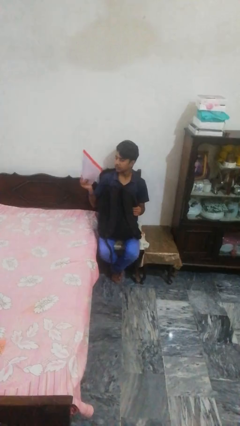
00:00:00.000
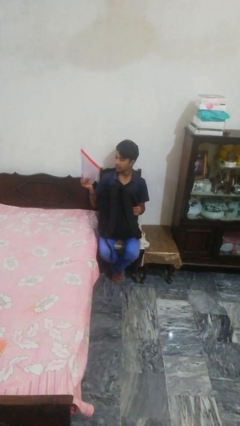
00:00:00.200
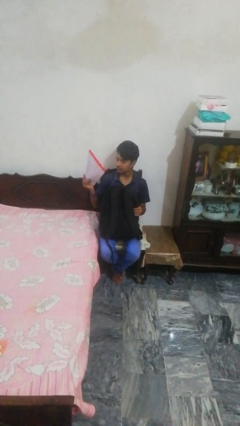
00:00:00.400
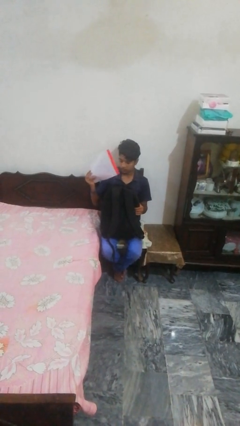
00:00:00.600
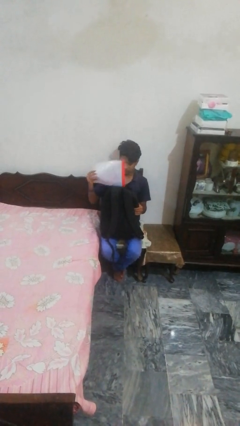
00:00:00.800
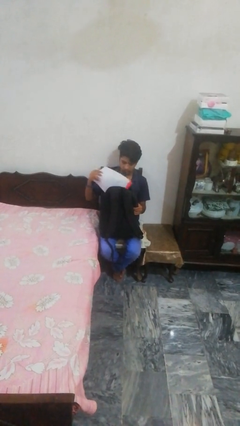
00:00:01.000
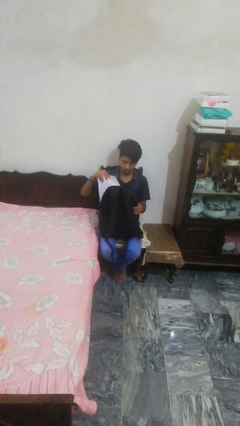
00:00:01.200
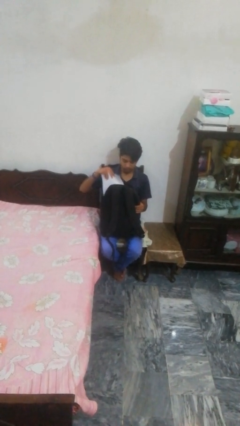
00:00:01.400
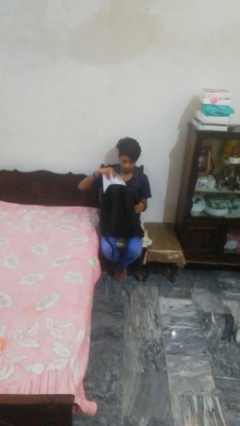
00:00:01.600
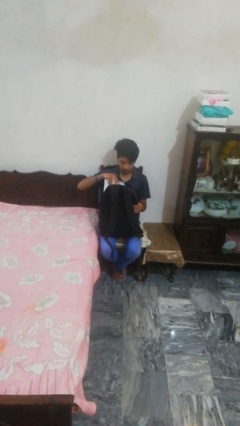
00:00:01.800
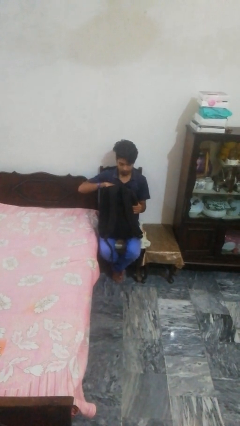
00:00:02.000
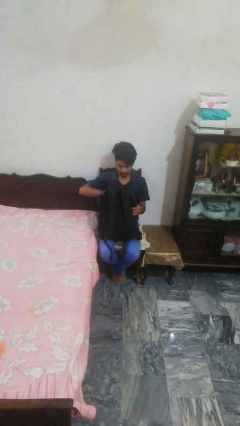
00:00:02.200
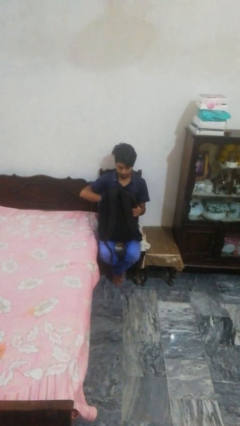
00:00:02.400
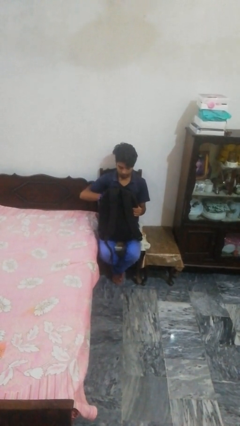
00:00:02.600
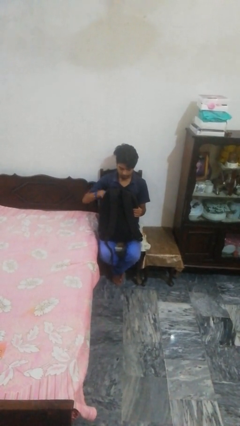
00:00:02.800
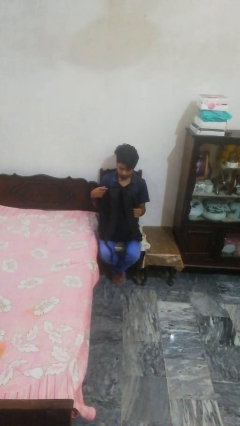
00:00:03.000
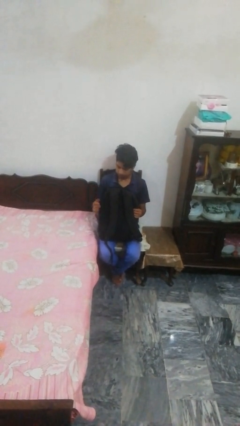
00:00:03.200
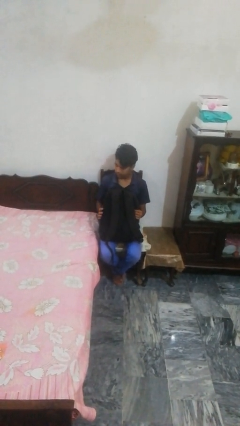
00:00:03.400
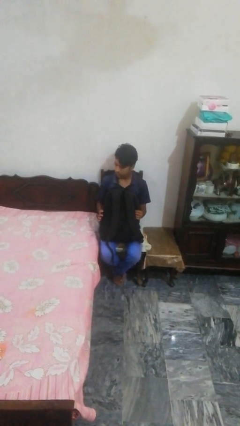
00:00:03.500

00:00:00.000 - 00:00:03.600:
person puts object into backpack

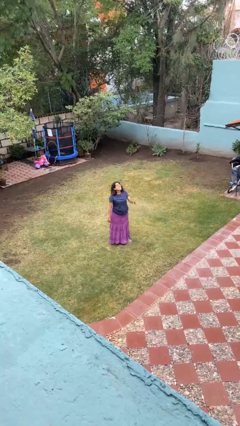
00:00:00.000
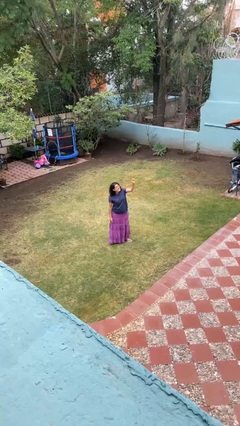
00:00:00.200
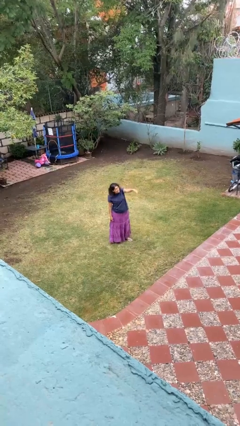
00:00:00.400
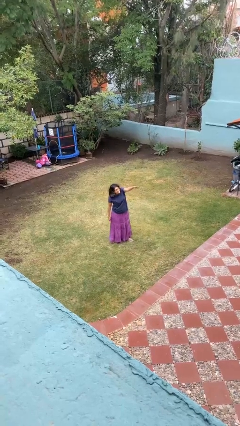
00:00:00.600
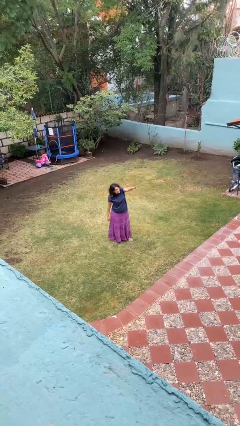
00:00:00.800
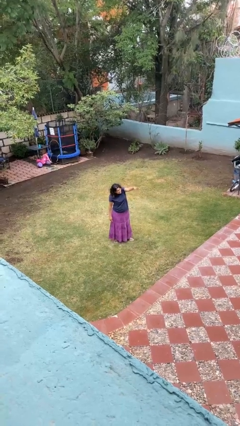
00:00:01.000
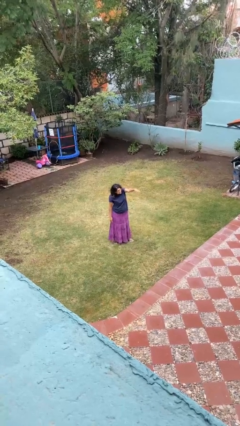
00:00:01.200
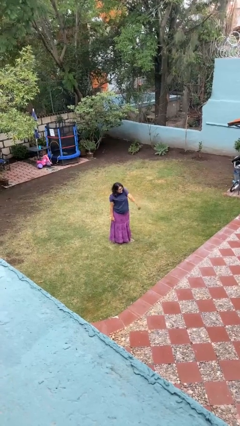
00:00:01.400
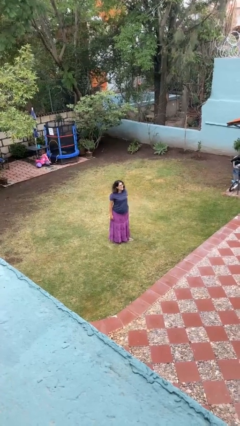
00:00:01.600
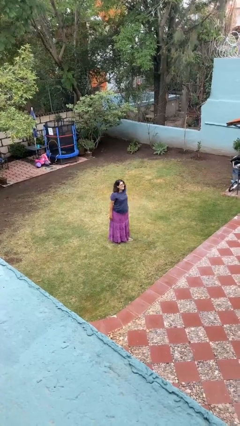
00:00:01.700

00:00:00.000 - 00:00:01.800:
person points at person

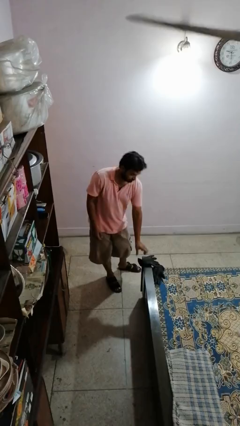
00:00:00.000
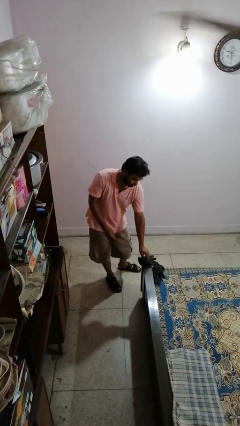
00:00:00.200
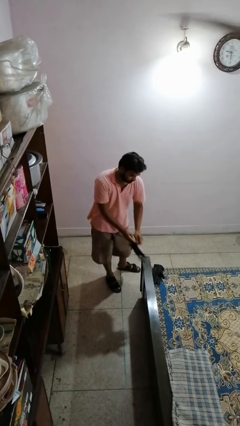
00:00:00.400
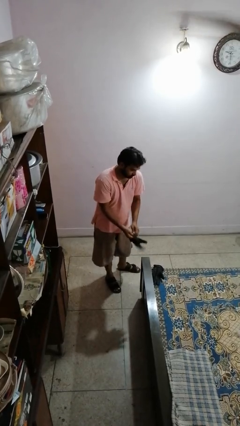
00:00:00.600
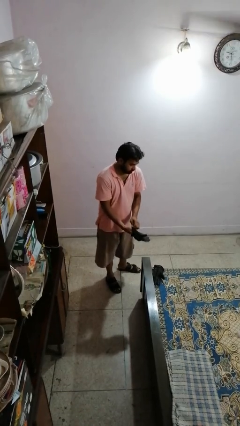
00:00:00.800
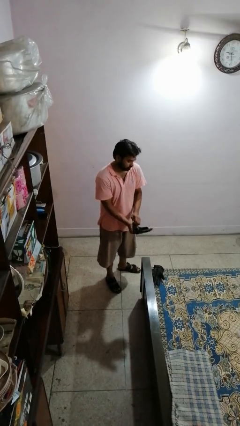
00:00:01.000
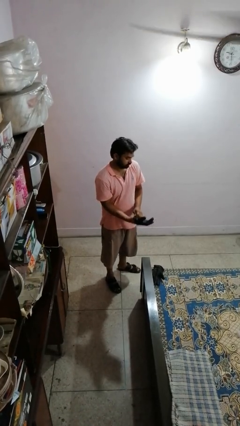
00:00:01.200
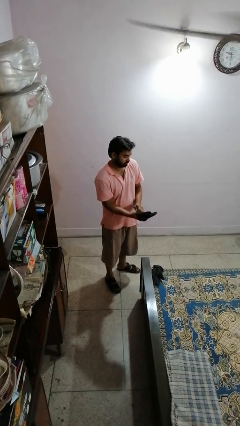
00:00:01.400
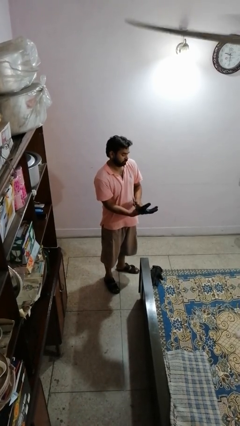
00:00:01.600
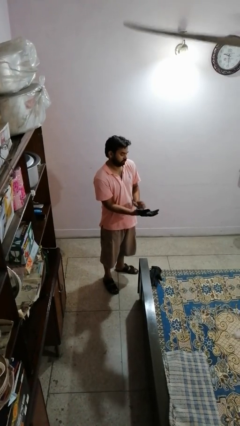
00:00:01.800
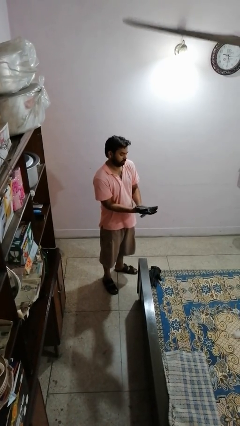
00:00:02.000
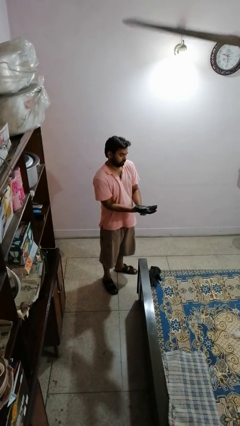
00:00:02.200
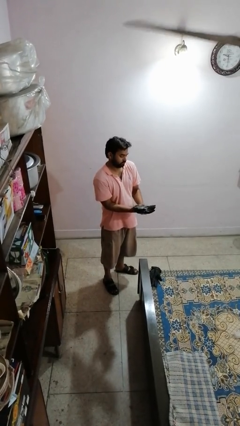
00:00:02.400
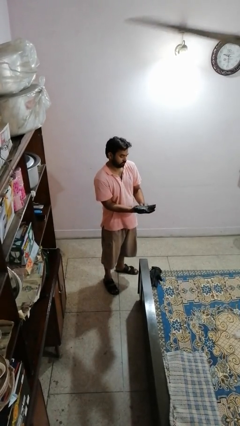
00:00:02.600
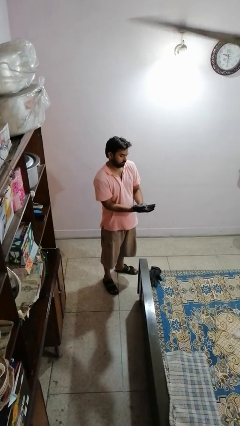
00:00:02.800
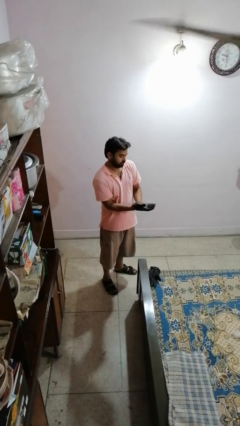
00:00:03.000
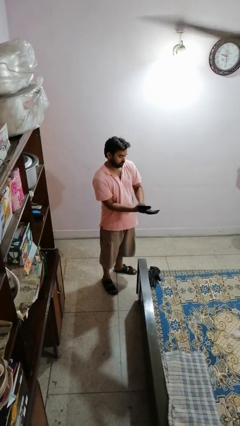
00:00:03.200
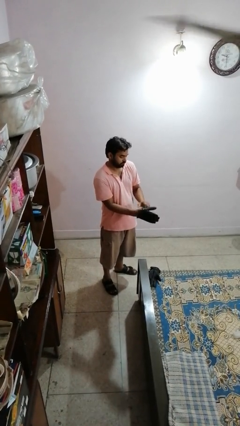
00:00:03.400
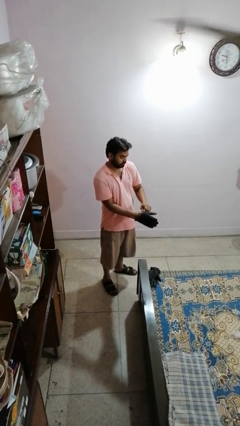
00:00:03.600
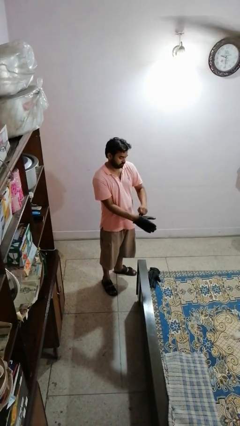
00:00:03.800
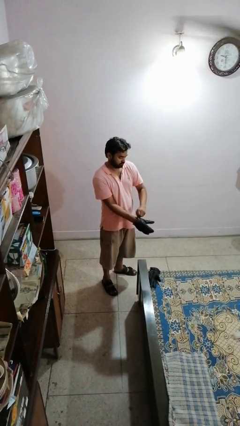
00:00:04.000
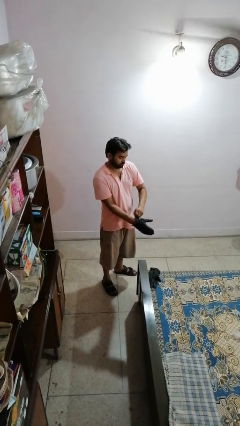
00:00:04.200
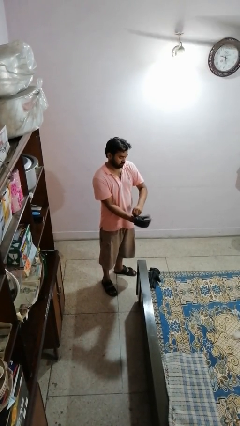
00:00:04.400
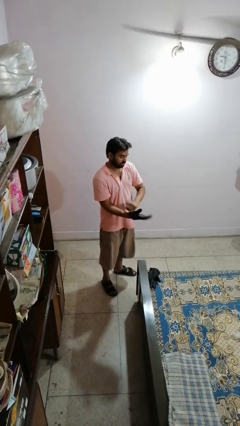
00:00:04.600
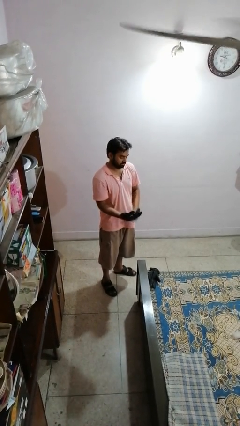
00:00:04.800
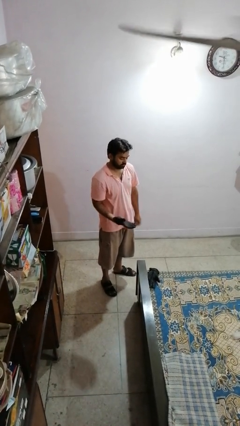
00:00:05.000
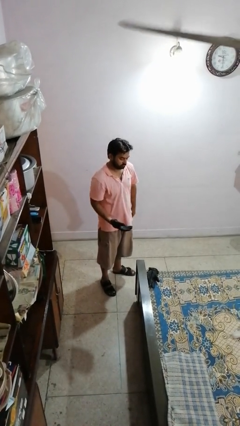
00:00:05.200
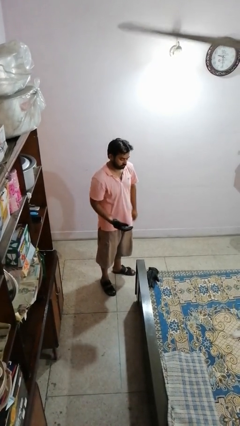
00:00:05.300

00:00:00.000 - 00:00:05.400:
person puts on gloves

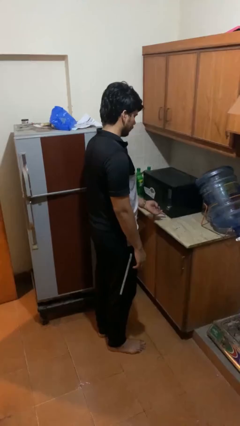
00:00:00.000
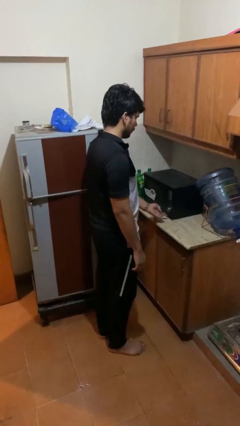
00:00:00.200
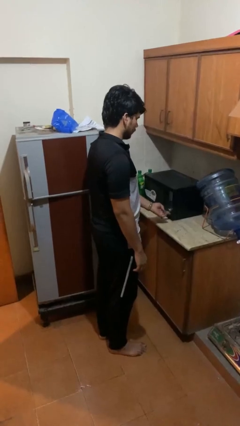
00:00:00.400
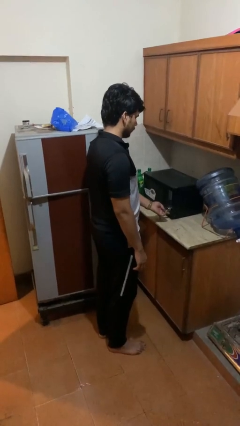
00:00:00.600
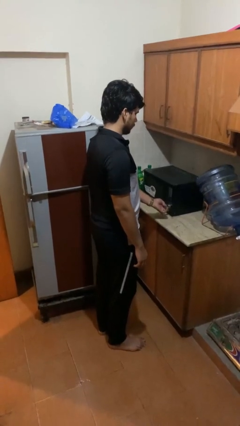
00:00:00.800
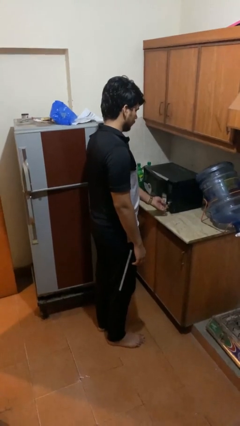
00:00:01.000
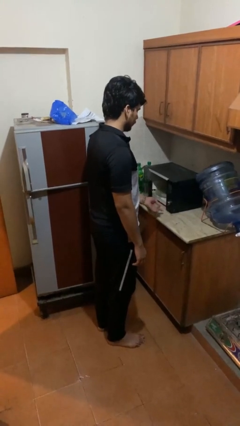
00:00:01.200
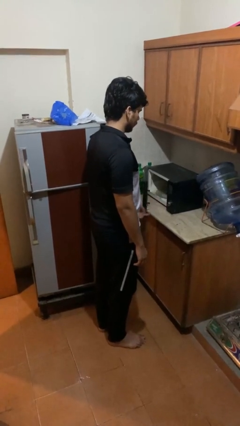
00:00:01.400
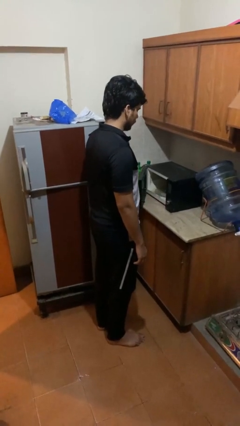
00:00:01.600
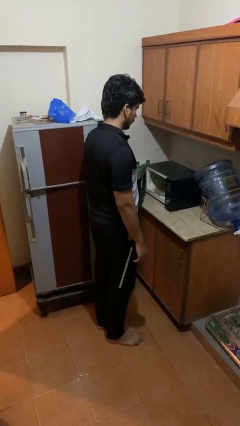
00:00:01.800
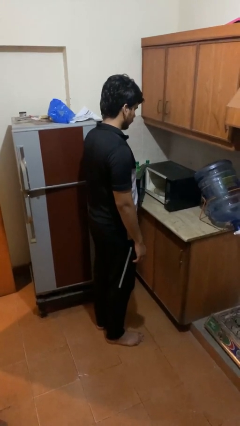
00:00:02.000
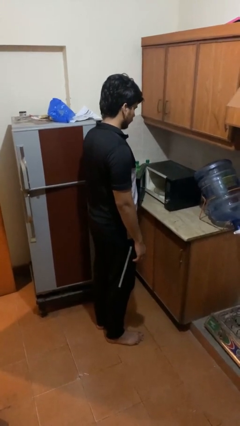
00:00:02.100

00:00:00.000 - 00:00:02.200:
person opens oven door

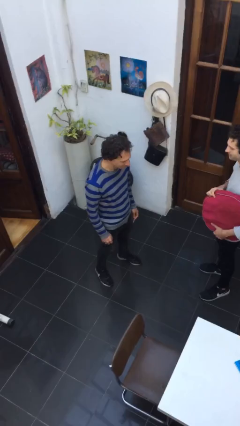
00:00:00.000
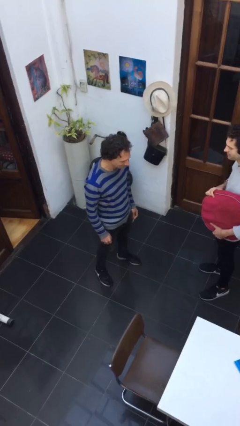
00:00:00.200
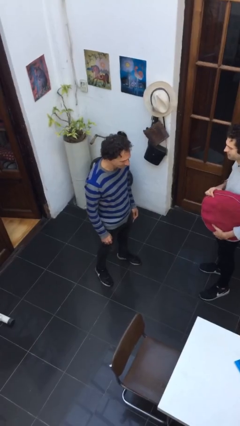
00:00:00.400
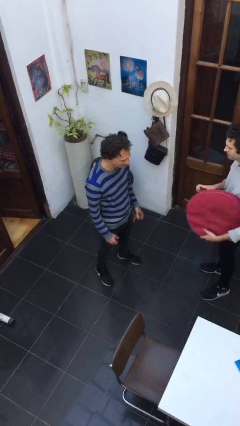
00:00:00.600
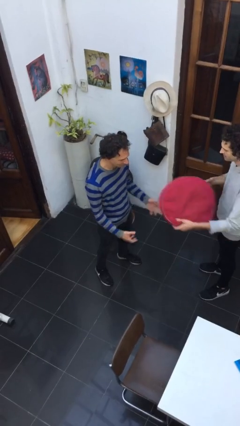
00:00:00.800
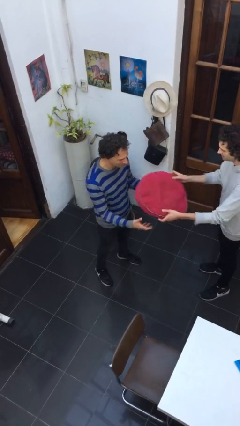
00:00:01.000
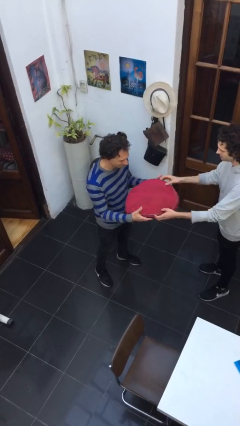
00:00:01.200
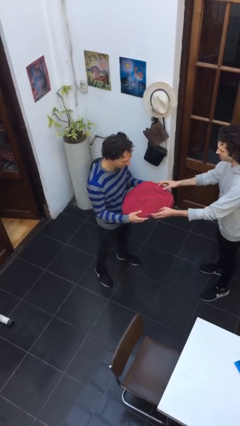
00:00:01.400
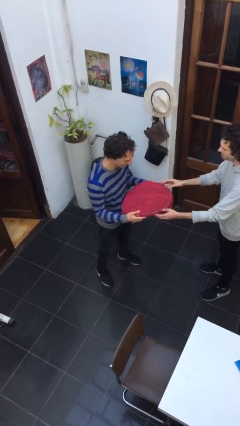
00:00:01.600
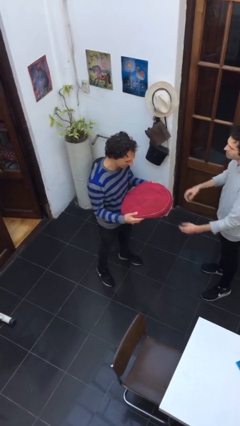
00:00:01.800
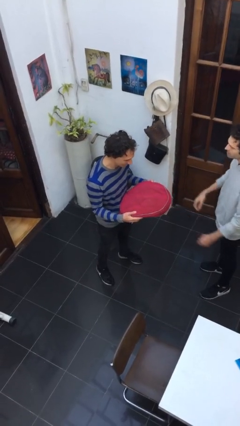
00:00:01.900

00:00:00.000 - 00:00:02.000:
person transfers object to person

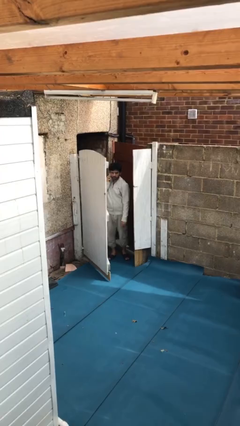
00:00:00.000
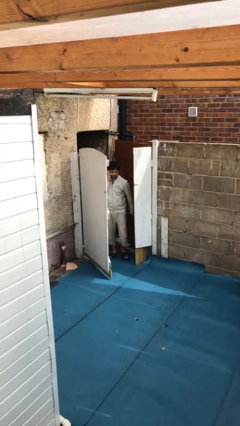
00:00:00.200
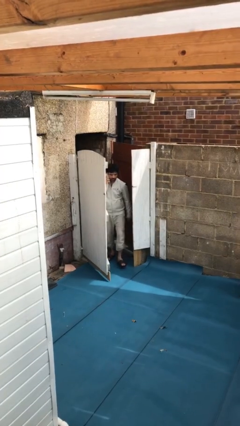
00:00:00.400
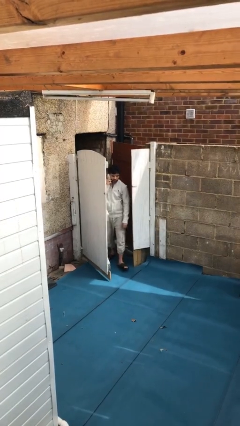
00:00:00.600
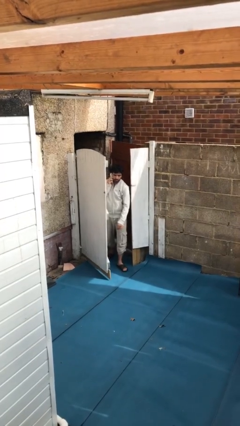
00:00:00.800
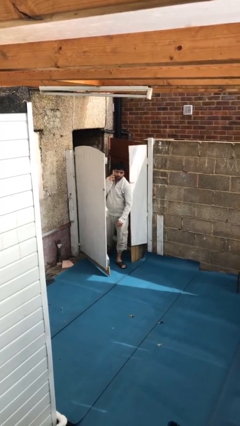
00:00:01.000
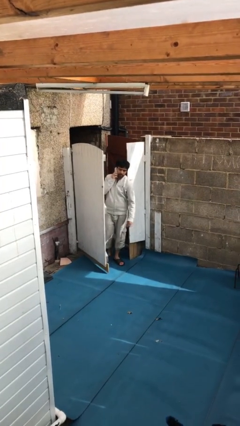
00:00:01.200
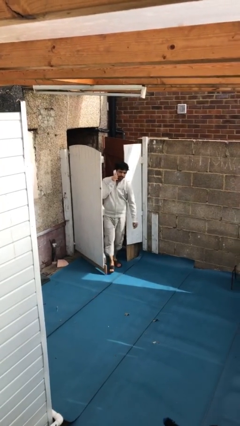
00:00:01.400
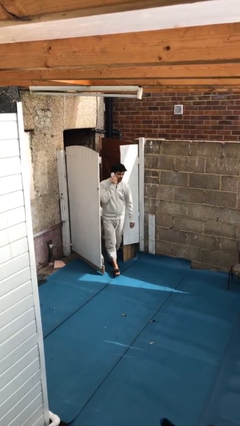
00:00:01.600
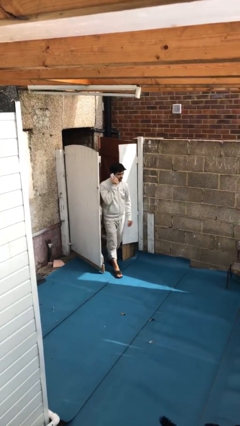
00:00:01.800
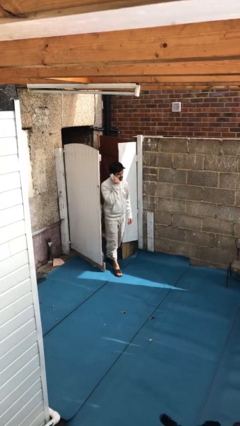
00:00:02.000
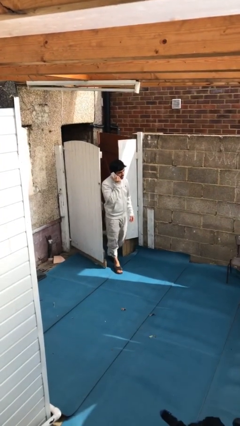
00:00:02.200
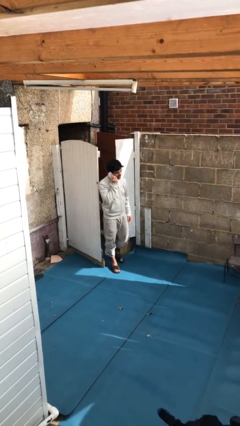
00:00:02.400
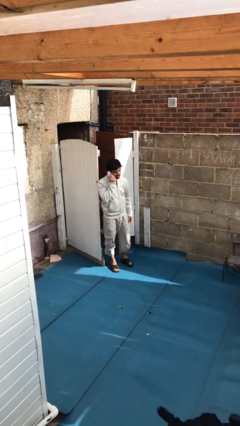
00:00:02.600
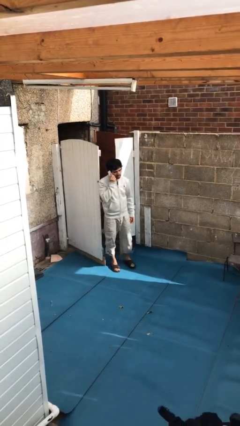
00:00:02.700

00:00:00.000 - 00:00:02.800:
person enters scene through structure
